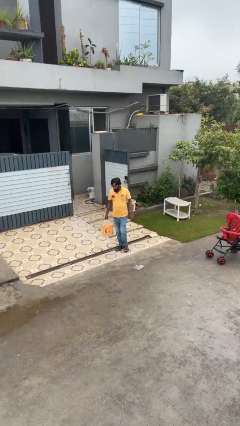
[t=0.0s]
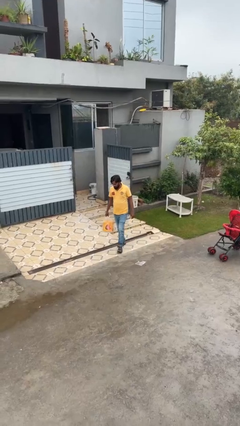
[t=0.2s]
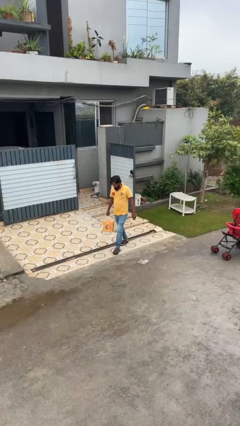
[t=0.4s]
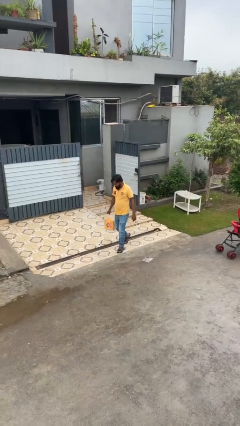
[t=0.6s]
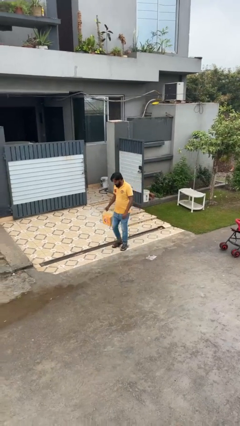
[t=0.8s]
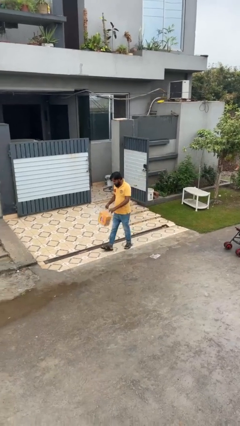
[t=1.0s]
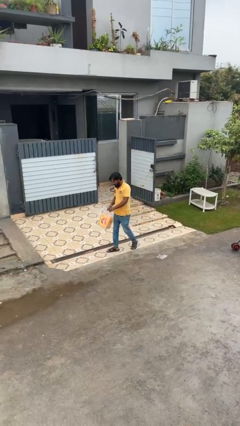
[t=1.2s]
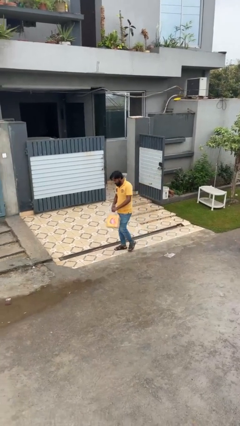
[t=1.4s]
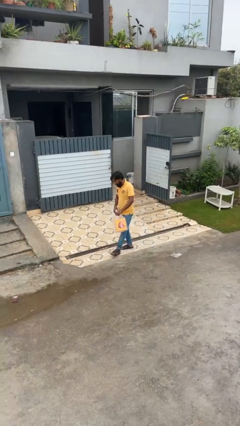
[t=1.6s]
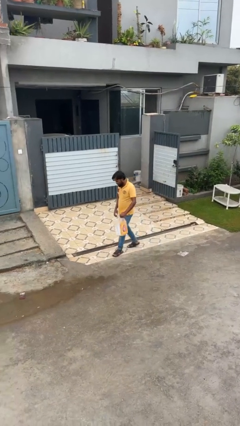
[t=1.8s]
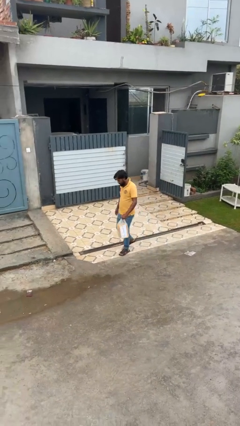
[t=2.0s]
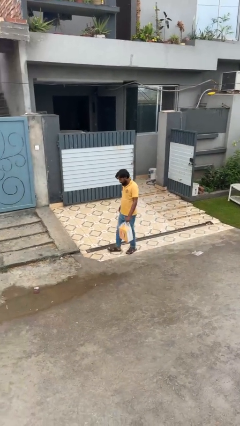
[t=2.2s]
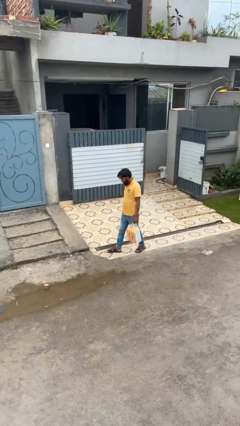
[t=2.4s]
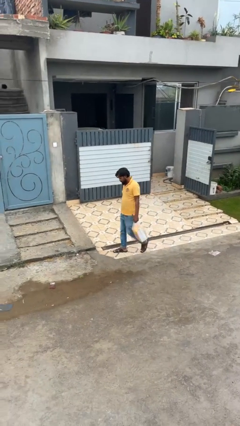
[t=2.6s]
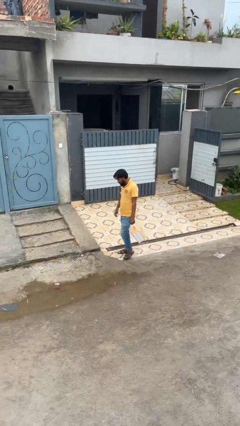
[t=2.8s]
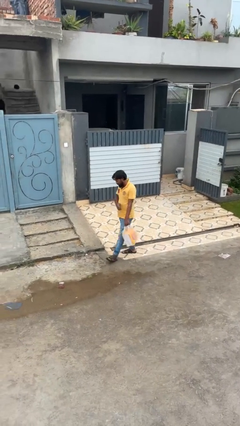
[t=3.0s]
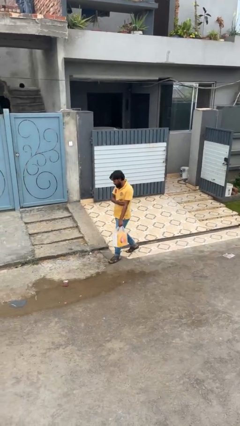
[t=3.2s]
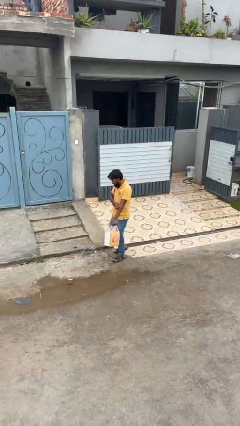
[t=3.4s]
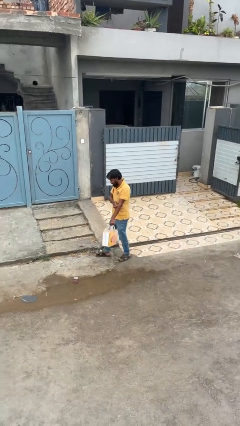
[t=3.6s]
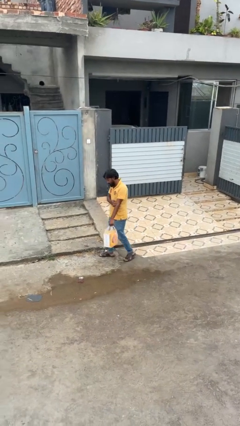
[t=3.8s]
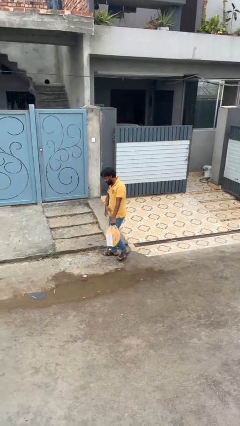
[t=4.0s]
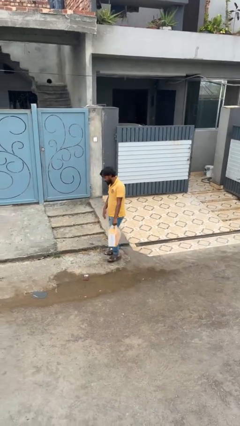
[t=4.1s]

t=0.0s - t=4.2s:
person carries groceries

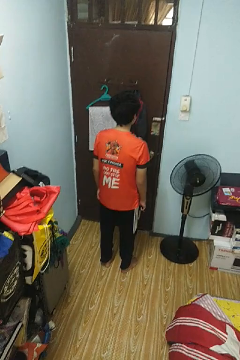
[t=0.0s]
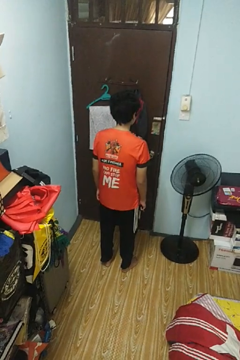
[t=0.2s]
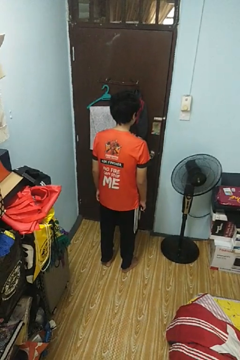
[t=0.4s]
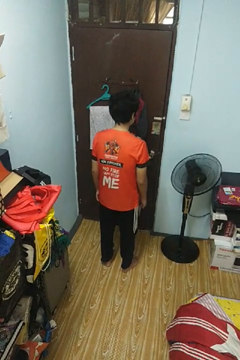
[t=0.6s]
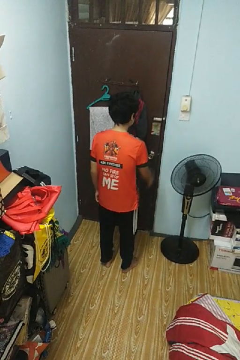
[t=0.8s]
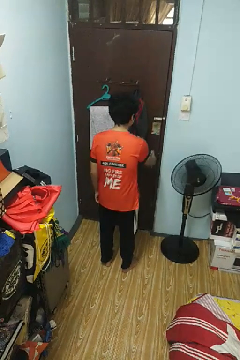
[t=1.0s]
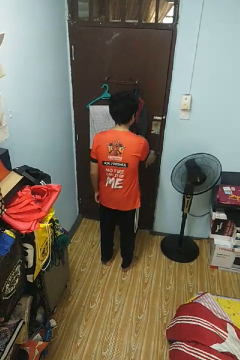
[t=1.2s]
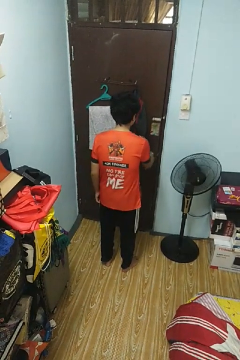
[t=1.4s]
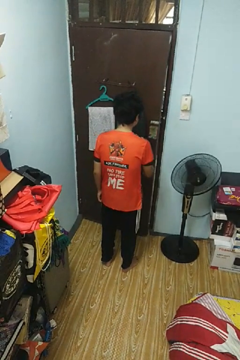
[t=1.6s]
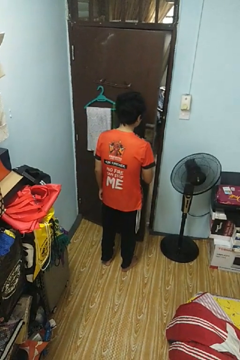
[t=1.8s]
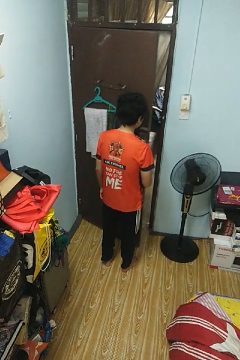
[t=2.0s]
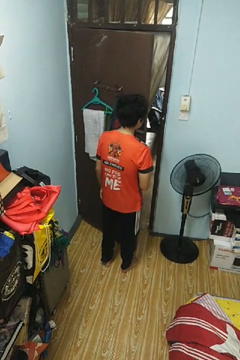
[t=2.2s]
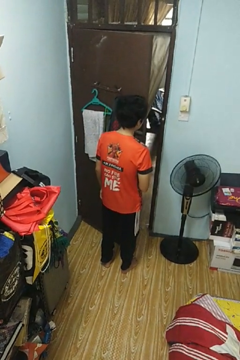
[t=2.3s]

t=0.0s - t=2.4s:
person opens facility door

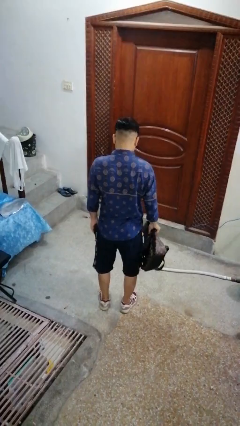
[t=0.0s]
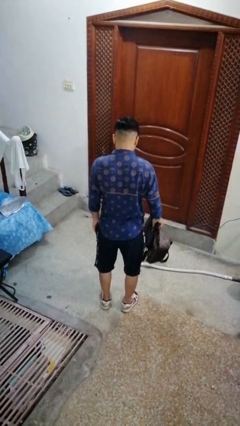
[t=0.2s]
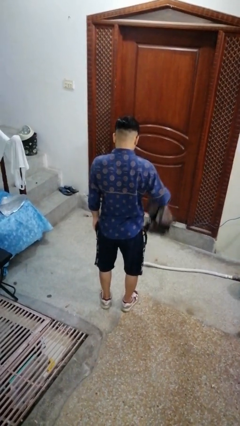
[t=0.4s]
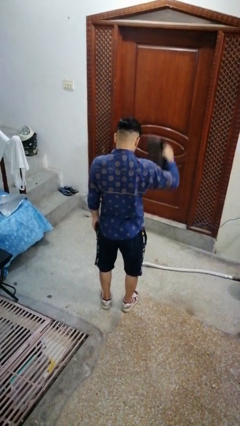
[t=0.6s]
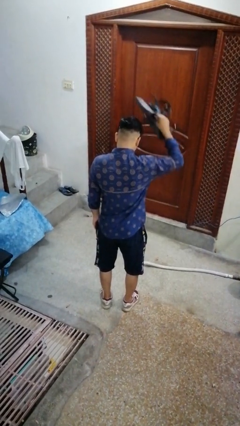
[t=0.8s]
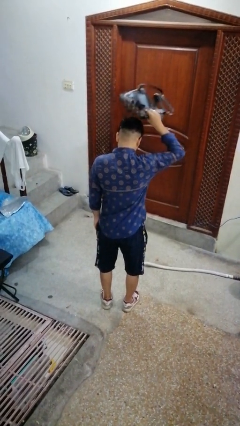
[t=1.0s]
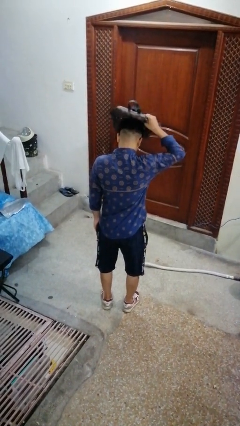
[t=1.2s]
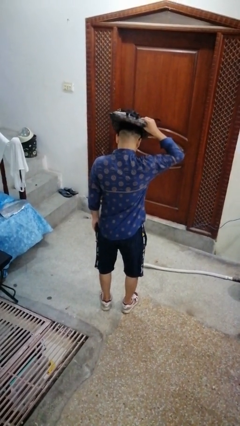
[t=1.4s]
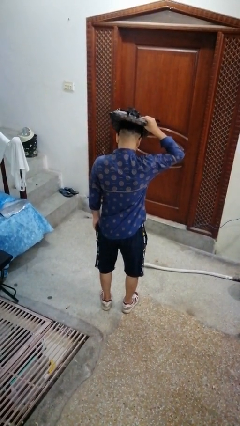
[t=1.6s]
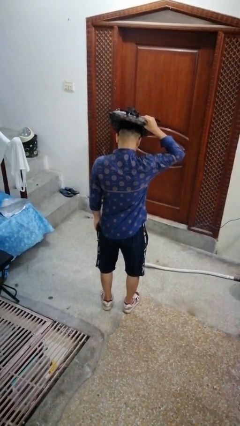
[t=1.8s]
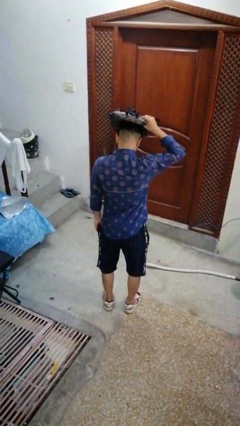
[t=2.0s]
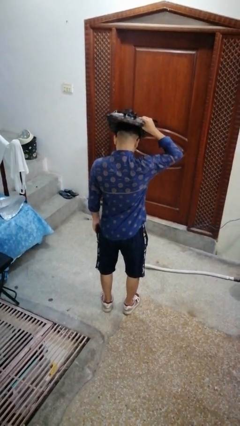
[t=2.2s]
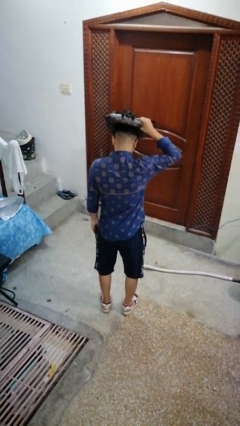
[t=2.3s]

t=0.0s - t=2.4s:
person holds object above head

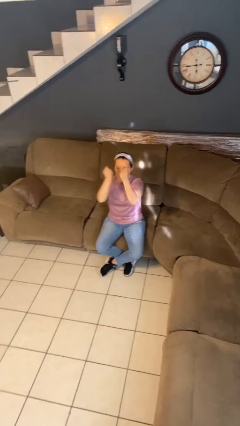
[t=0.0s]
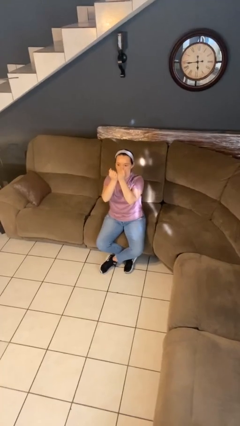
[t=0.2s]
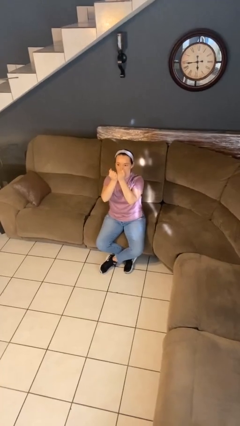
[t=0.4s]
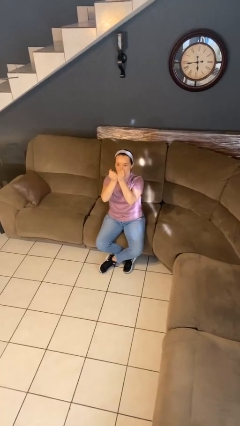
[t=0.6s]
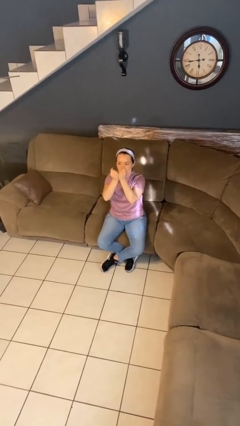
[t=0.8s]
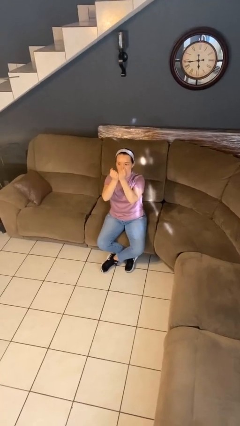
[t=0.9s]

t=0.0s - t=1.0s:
person gestures zoom in

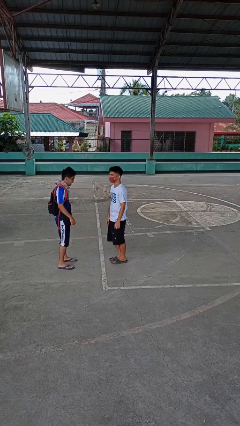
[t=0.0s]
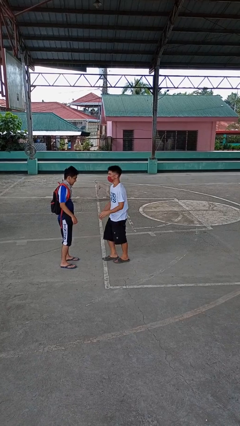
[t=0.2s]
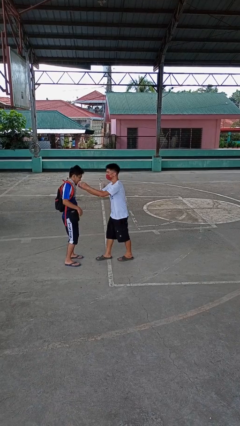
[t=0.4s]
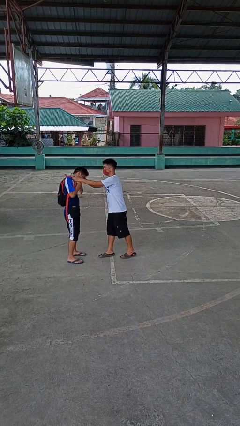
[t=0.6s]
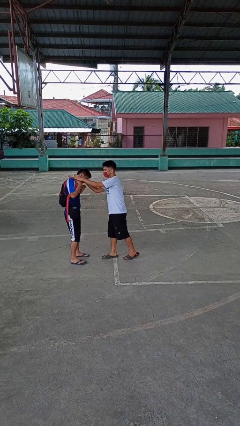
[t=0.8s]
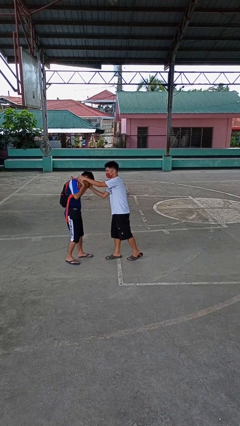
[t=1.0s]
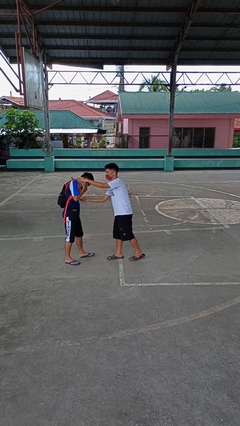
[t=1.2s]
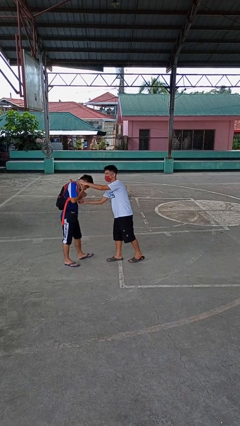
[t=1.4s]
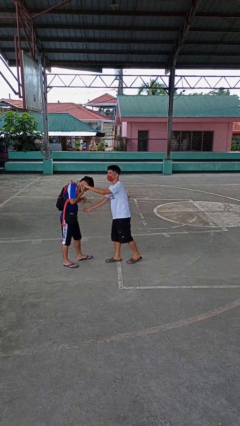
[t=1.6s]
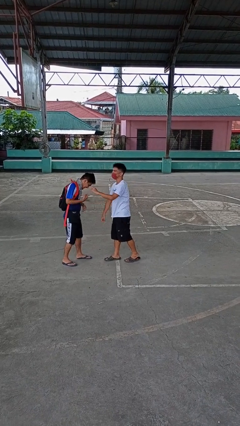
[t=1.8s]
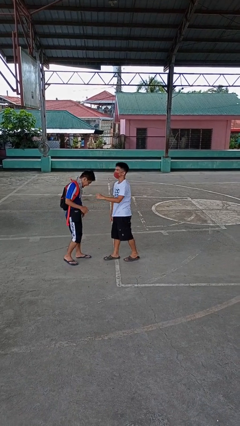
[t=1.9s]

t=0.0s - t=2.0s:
person tickles person

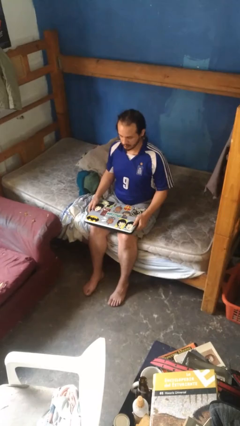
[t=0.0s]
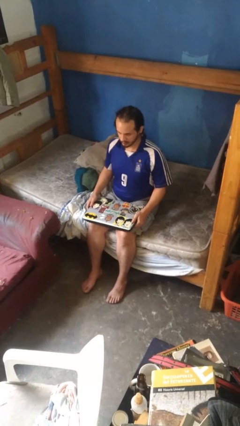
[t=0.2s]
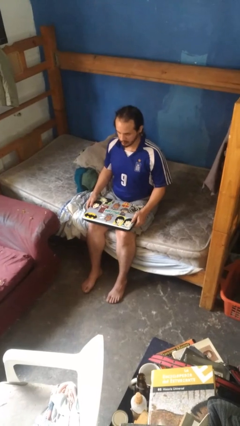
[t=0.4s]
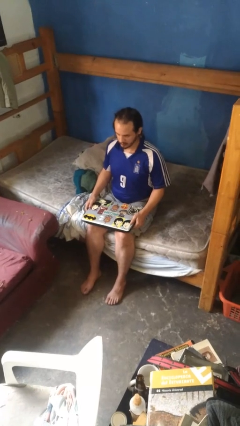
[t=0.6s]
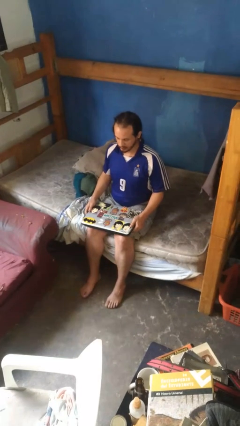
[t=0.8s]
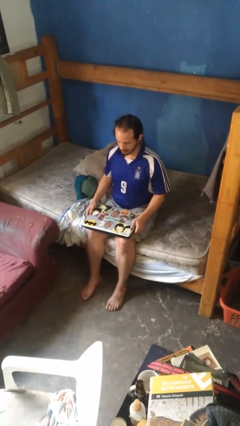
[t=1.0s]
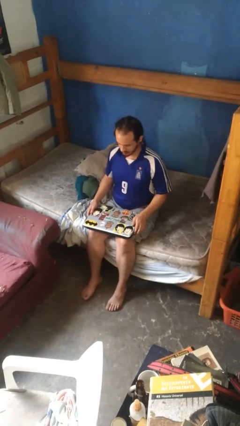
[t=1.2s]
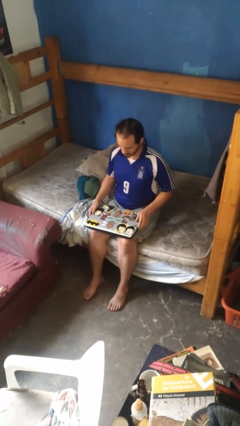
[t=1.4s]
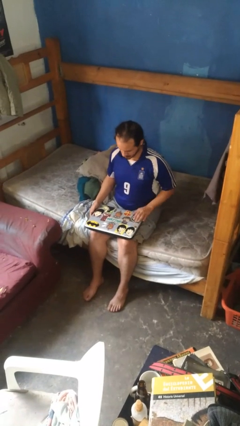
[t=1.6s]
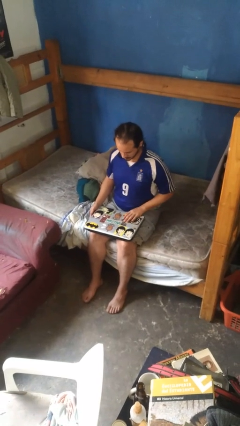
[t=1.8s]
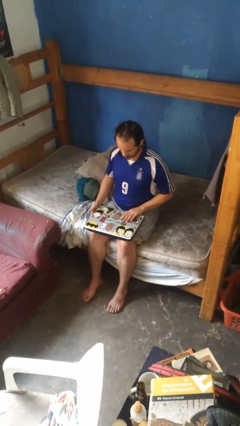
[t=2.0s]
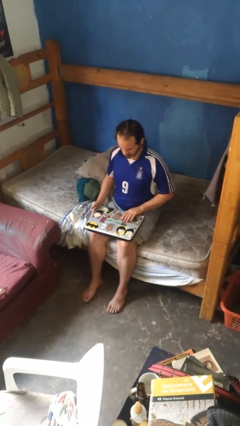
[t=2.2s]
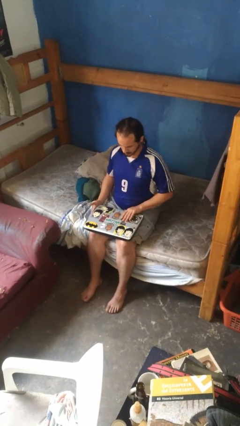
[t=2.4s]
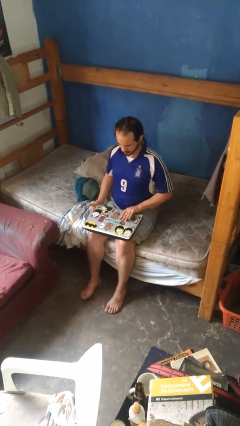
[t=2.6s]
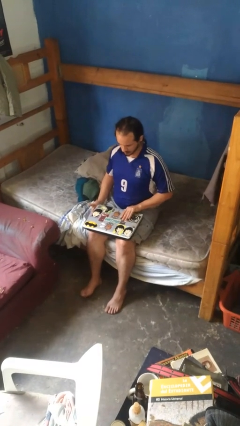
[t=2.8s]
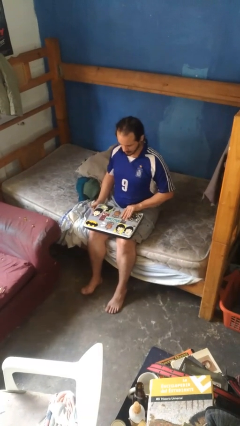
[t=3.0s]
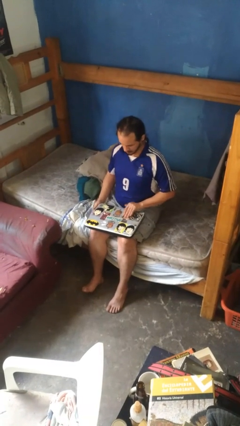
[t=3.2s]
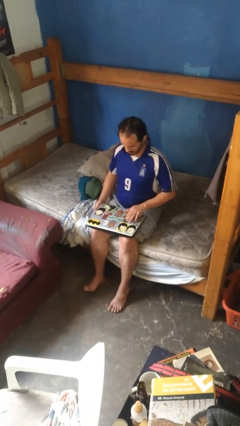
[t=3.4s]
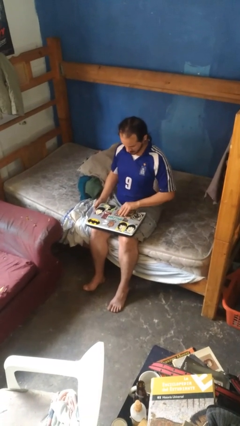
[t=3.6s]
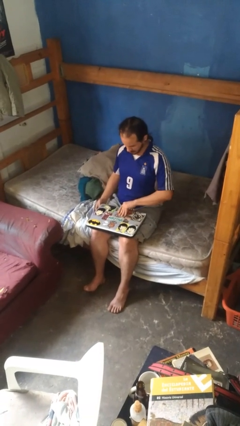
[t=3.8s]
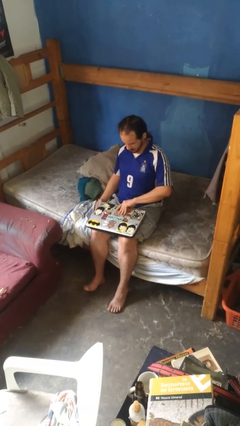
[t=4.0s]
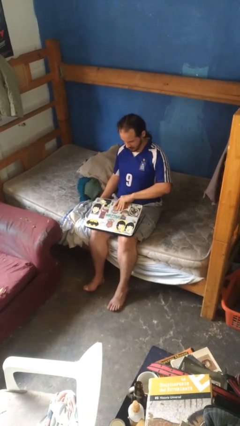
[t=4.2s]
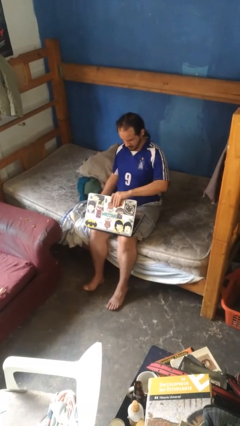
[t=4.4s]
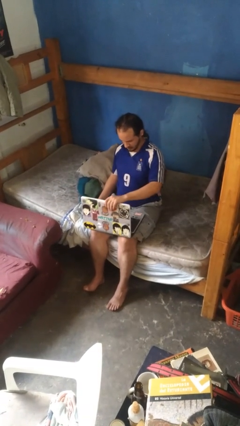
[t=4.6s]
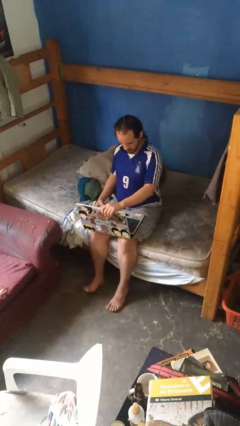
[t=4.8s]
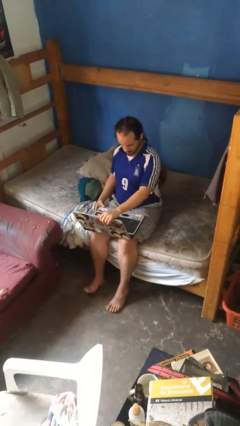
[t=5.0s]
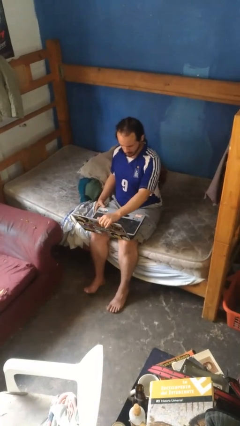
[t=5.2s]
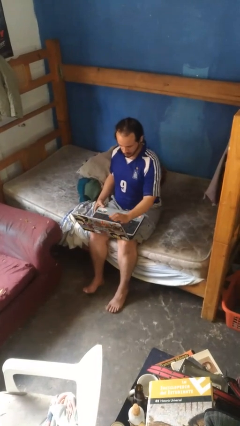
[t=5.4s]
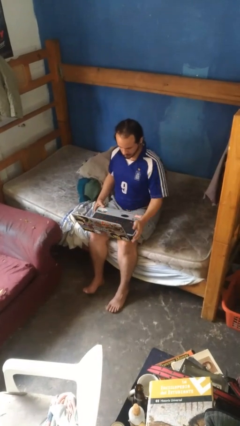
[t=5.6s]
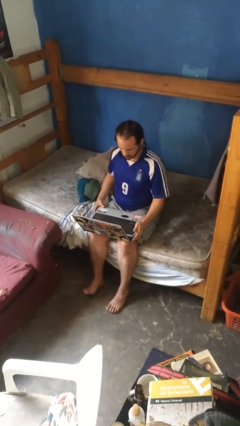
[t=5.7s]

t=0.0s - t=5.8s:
person opens laptop
